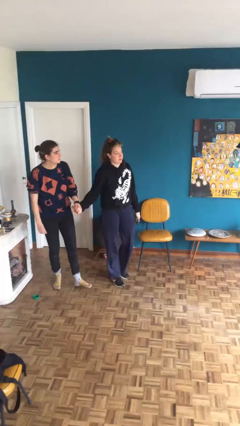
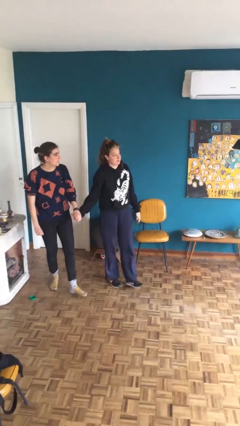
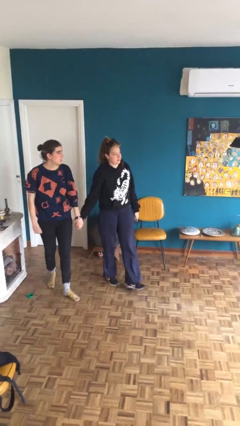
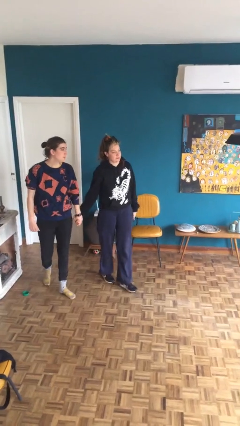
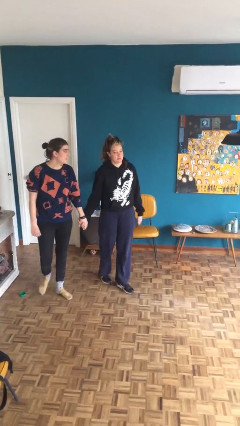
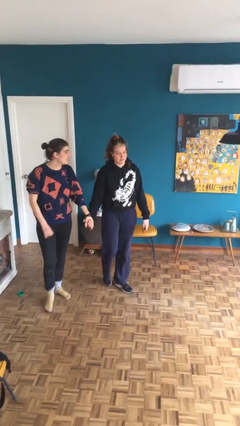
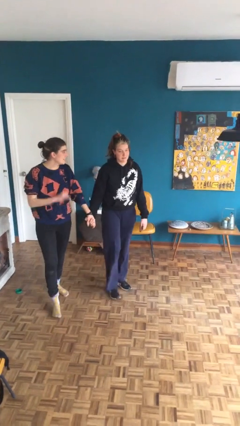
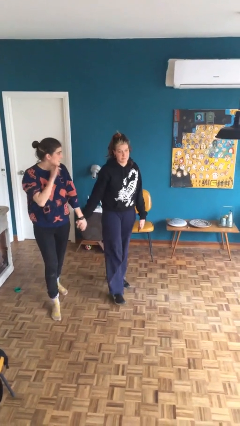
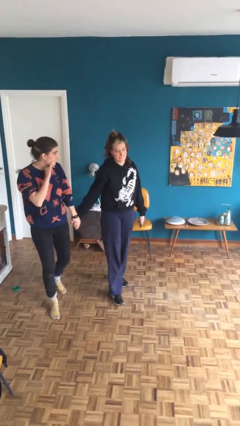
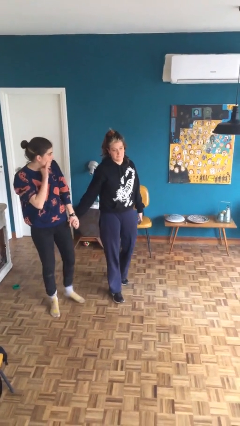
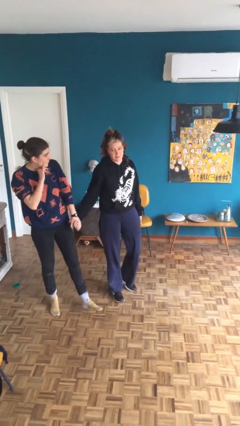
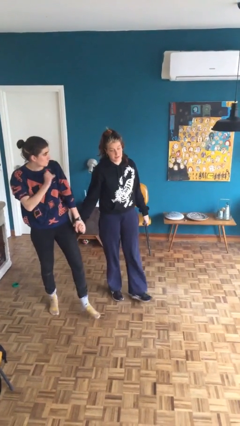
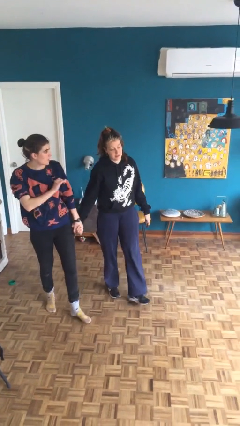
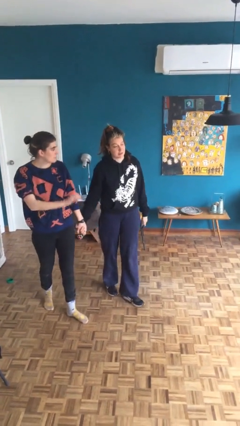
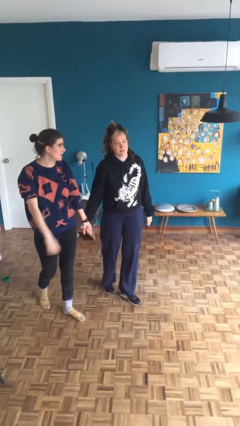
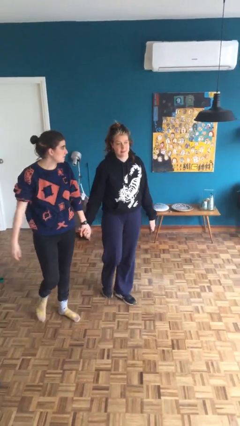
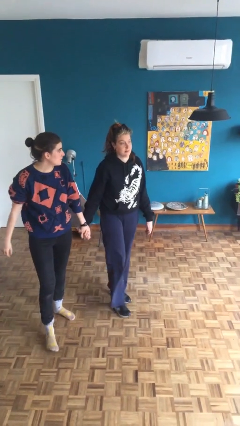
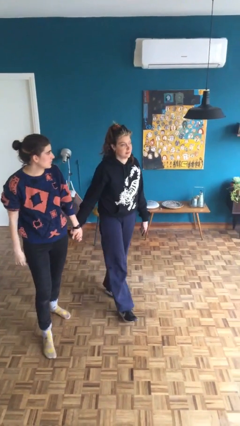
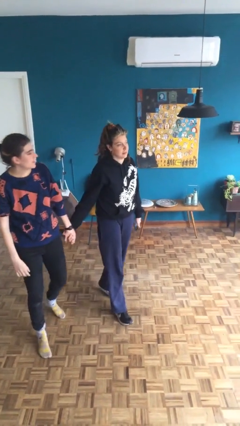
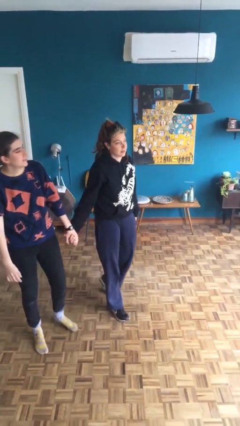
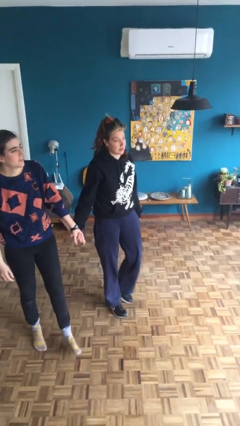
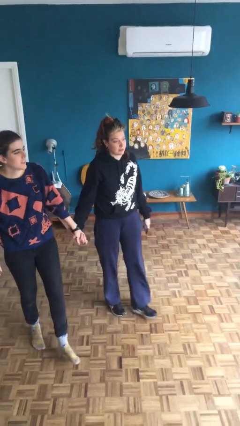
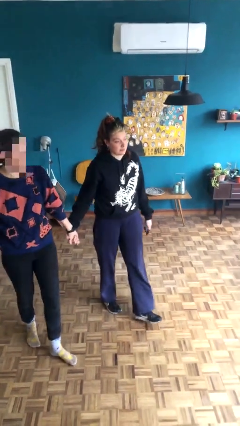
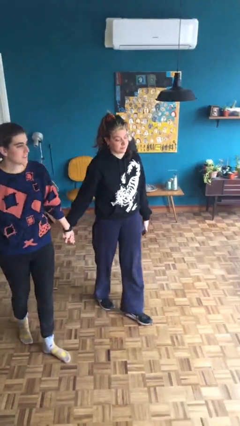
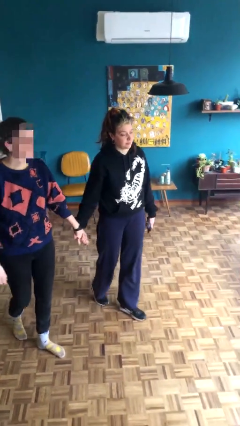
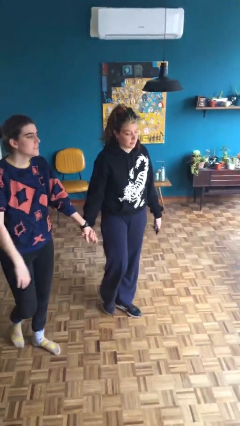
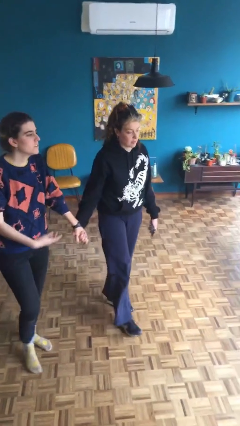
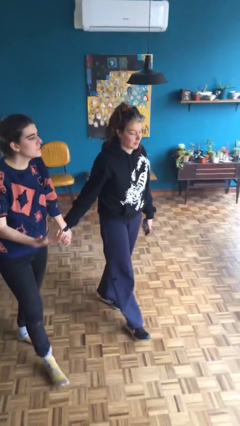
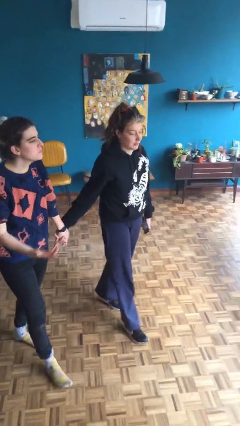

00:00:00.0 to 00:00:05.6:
person holds hand

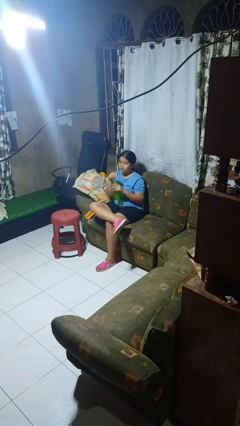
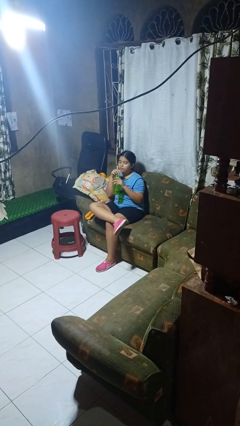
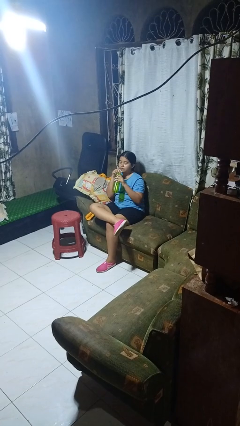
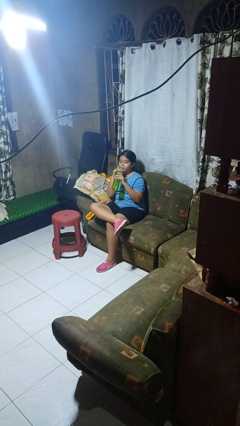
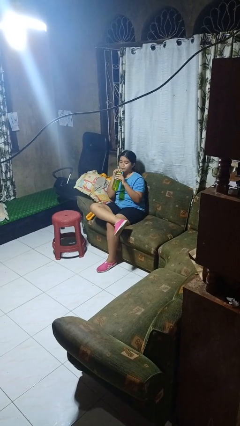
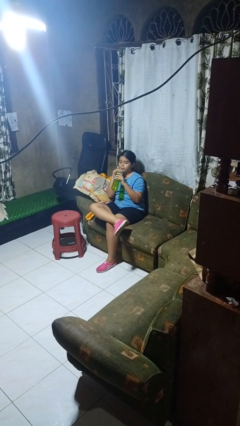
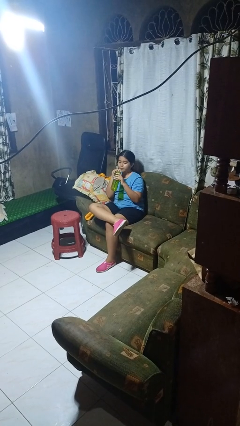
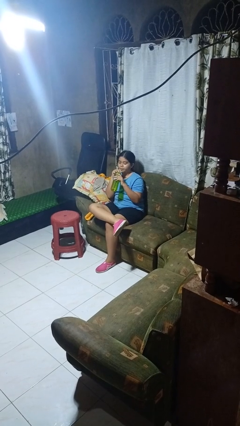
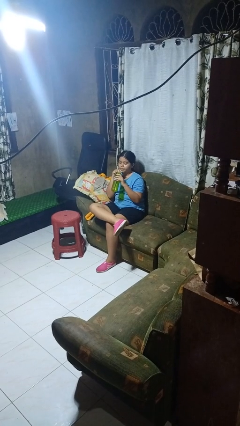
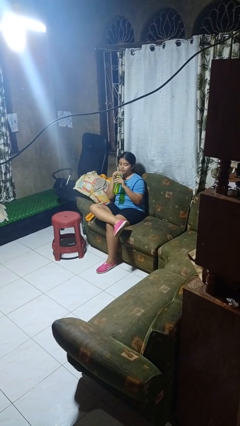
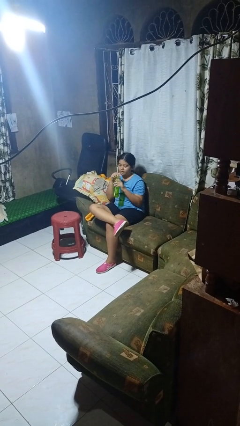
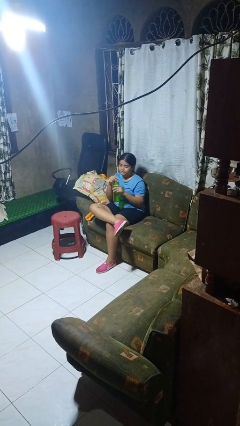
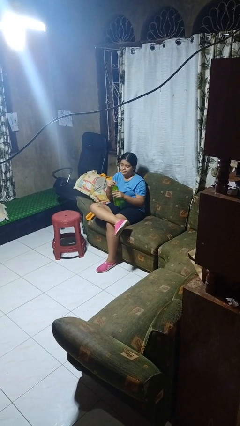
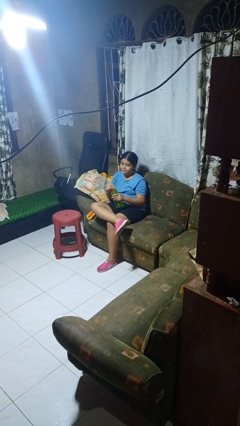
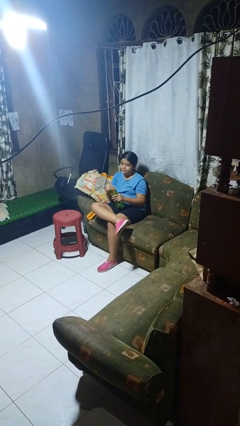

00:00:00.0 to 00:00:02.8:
person drinks from straw

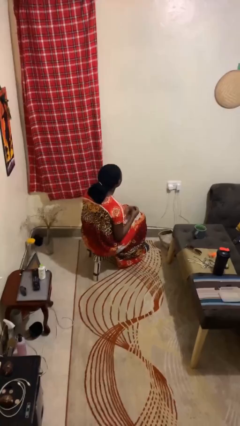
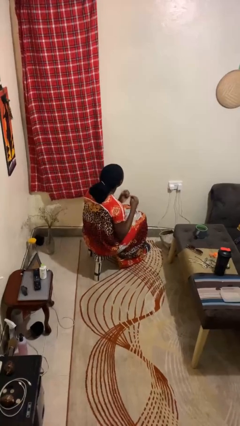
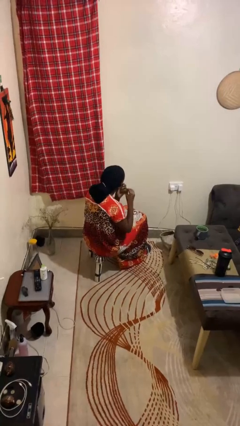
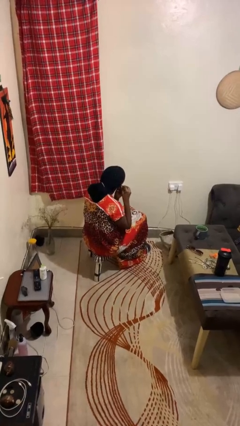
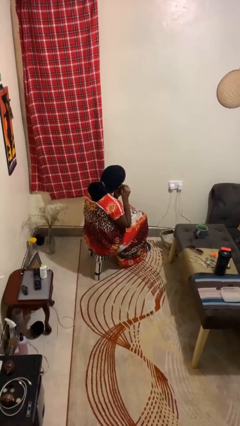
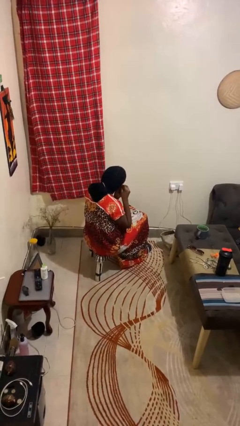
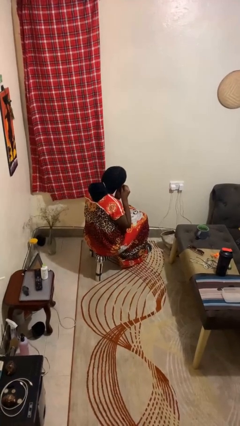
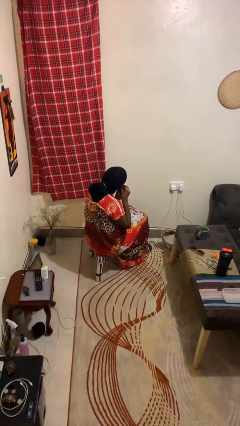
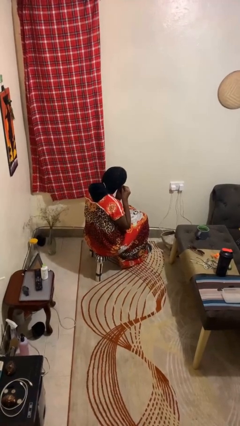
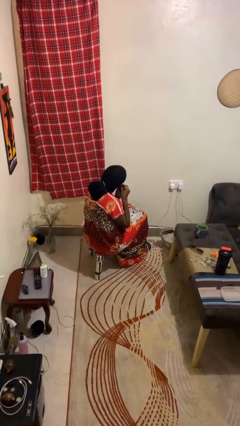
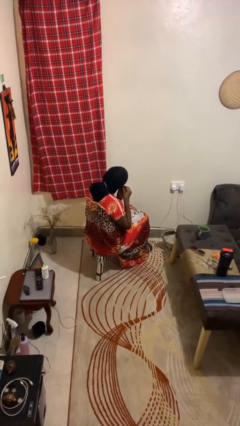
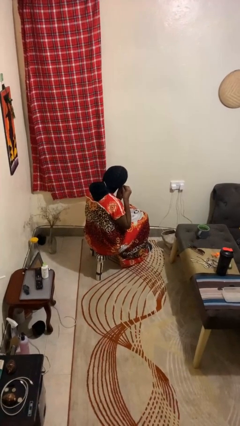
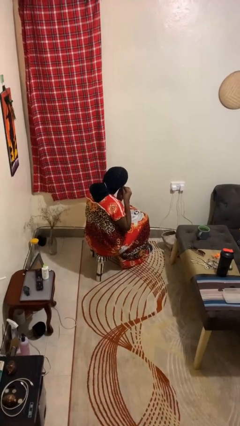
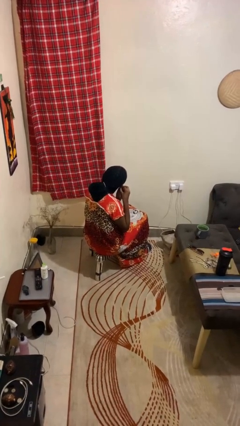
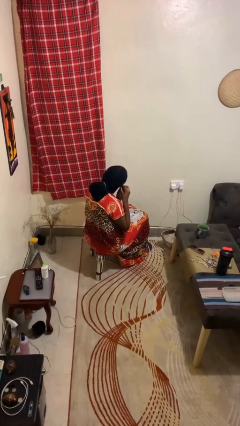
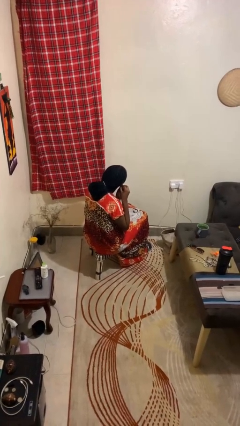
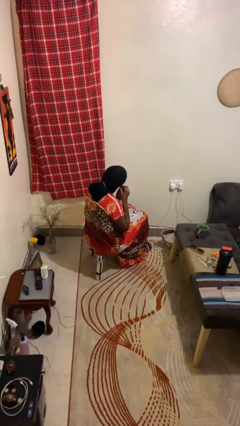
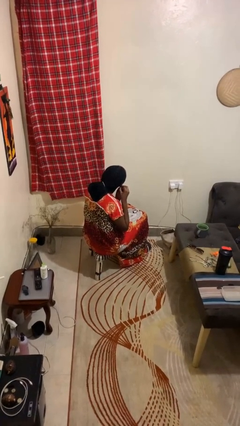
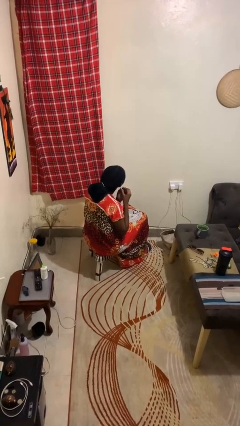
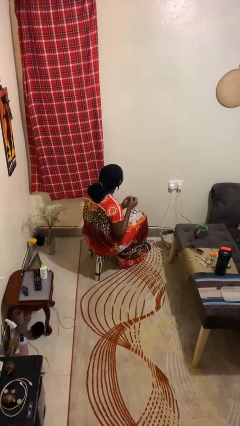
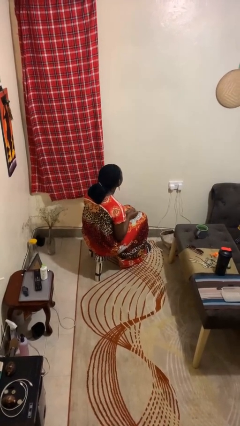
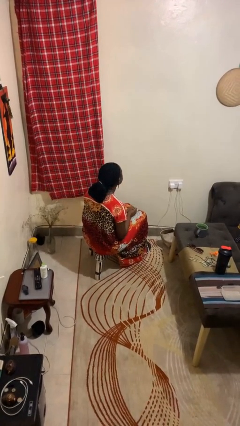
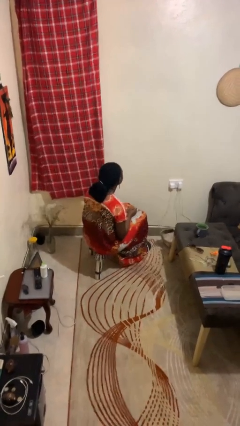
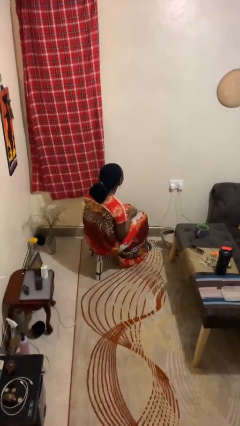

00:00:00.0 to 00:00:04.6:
person puts on earrings

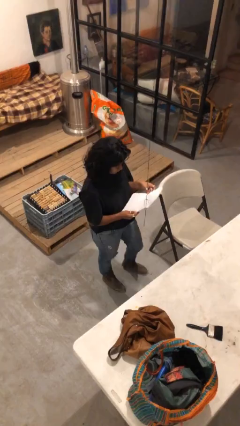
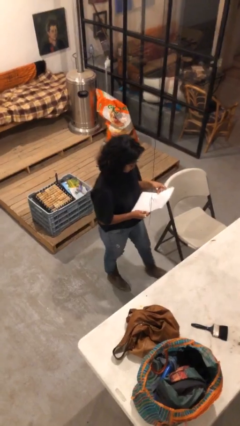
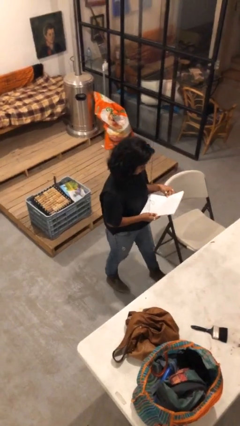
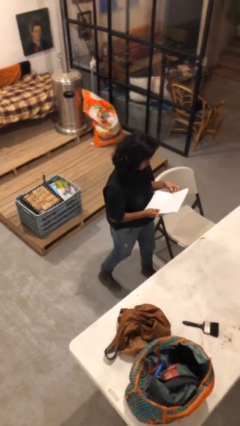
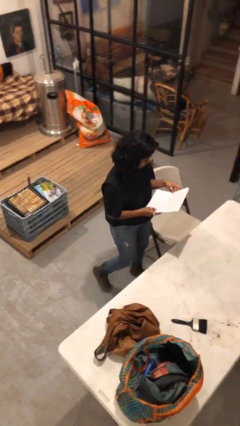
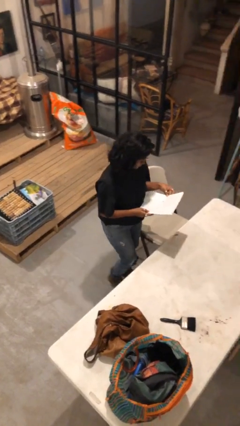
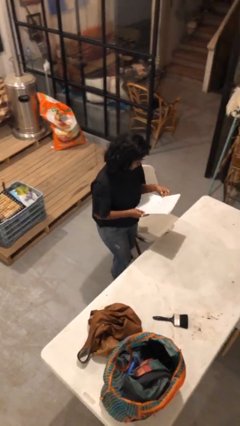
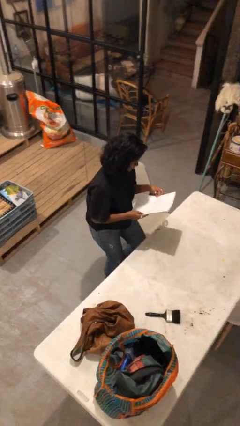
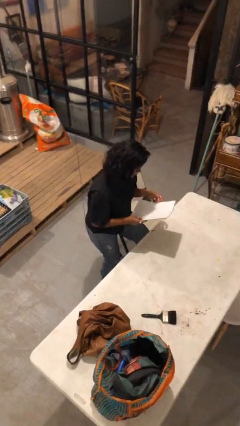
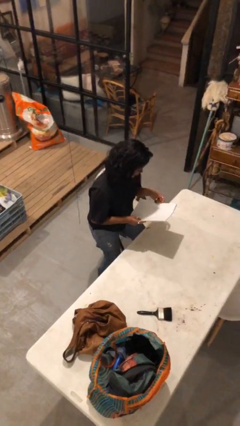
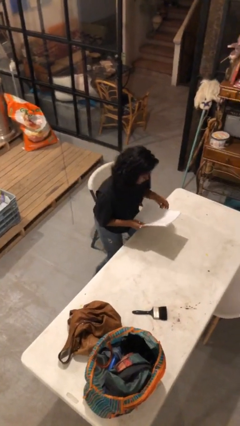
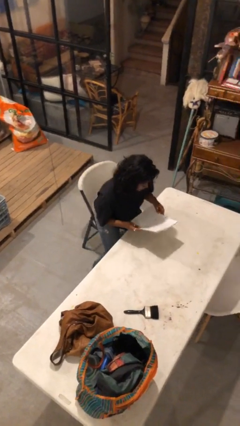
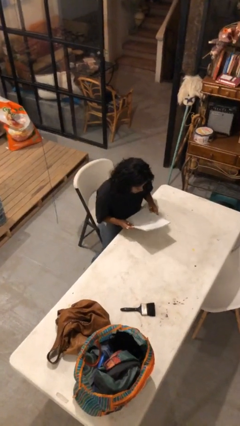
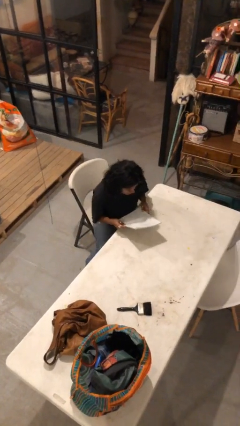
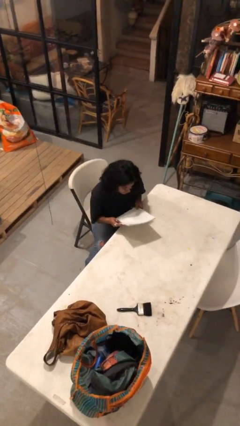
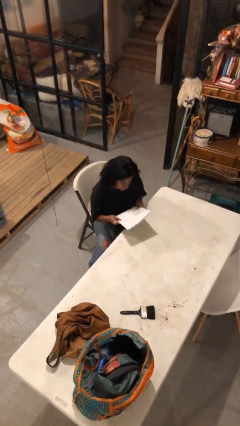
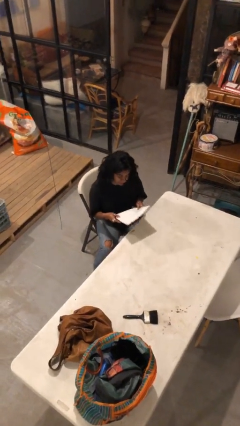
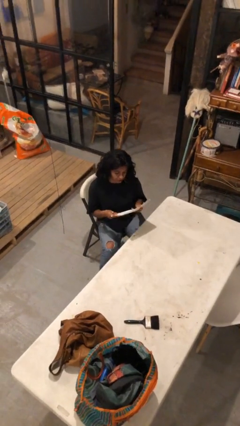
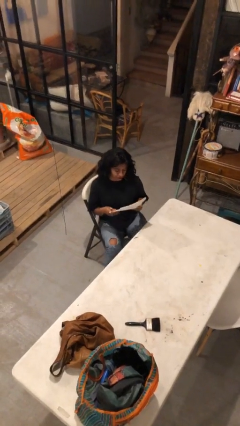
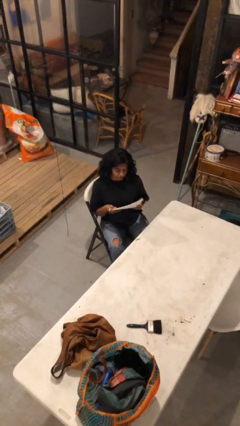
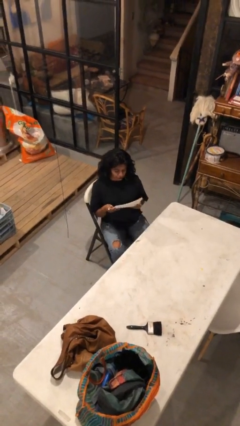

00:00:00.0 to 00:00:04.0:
person sits down

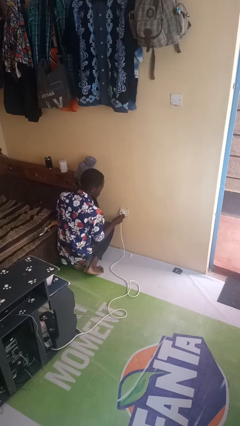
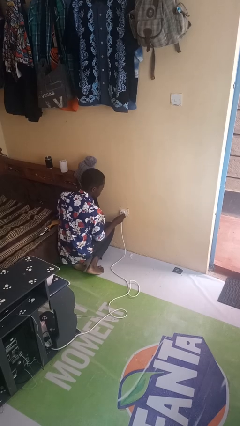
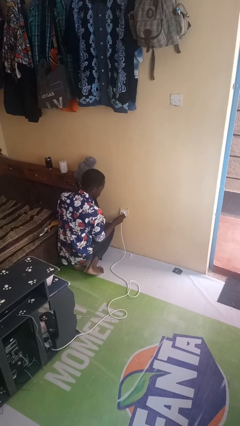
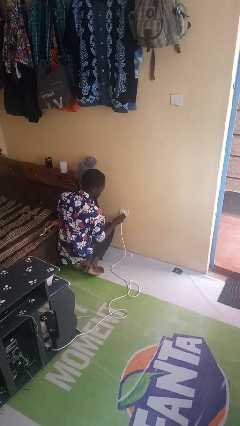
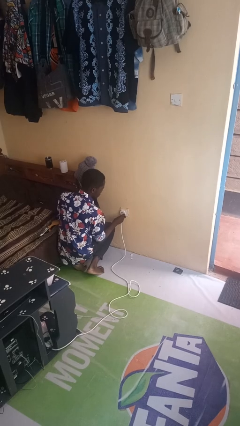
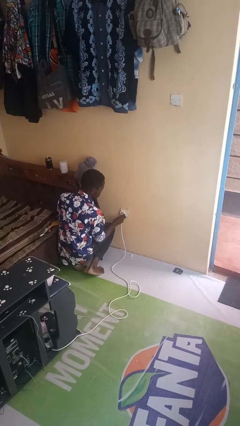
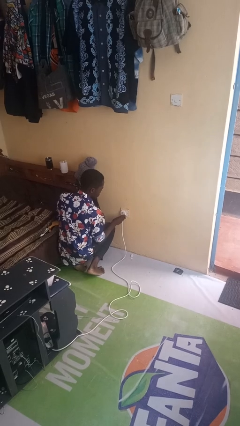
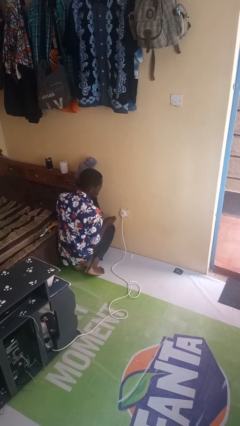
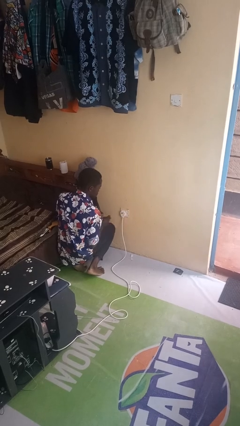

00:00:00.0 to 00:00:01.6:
person plugs into electrical socket
